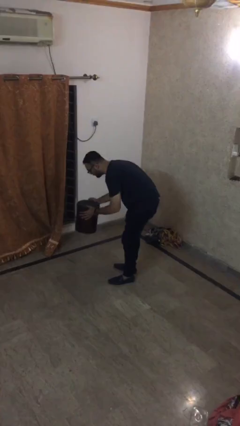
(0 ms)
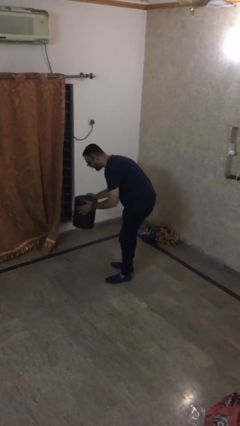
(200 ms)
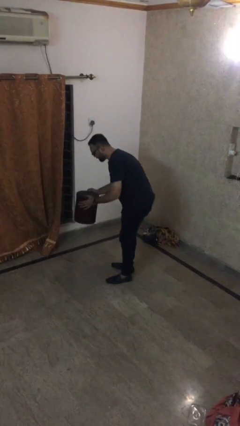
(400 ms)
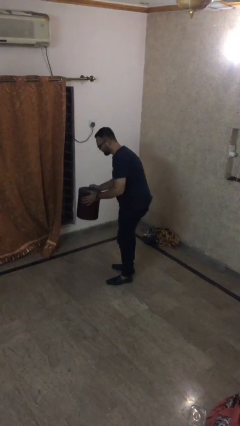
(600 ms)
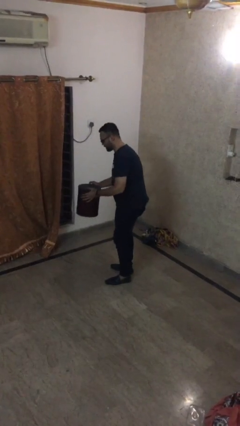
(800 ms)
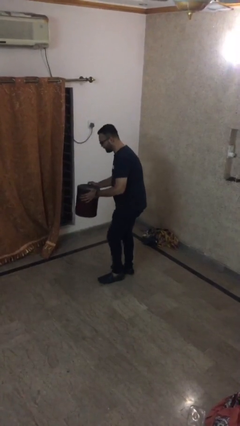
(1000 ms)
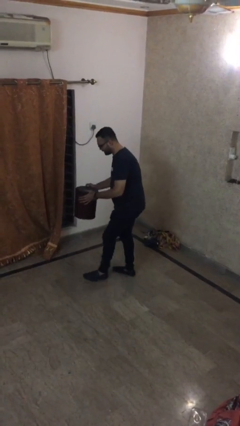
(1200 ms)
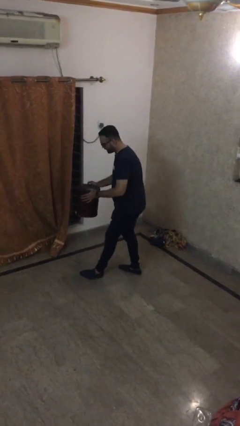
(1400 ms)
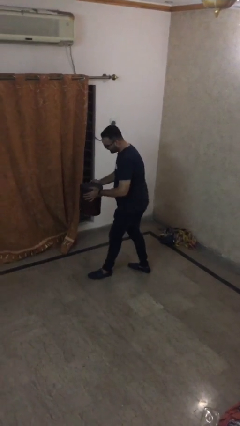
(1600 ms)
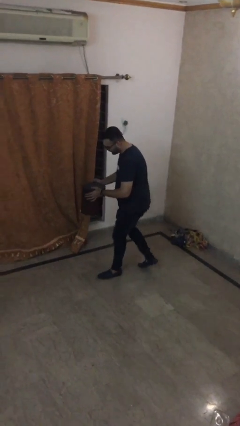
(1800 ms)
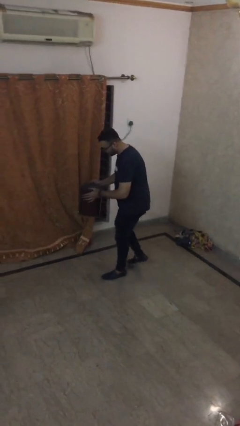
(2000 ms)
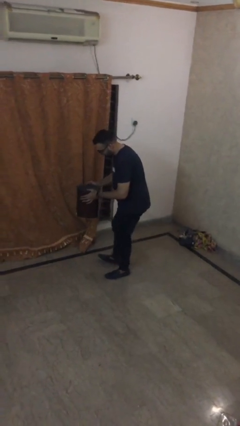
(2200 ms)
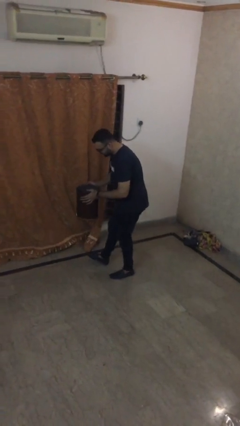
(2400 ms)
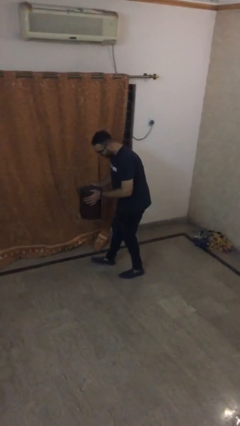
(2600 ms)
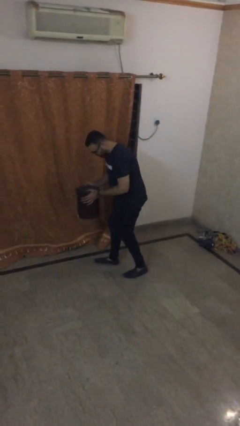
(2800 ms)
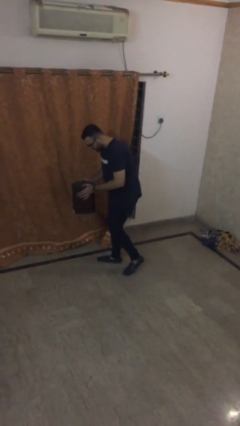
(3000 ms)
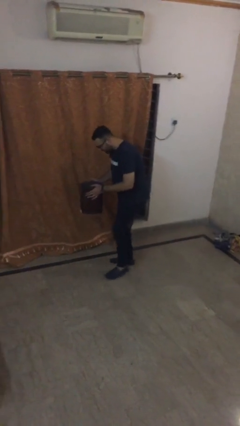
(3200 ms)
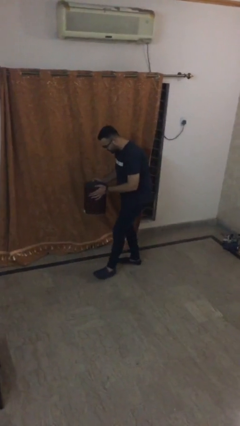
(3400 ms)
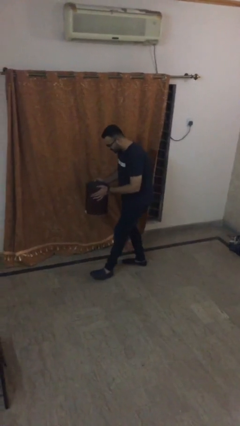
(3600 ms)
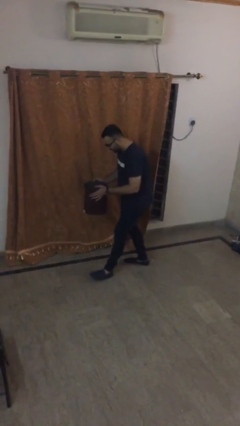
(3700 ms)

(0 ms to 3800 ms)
person carries heavy object

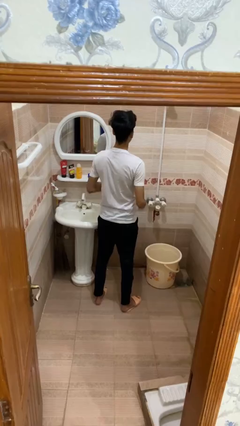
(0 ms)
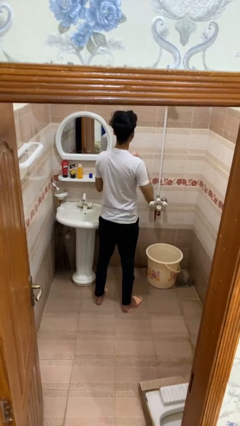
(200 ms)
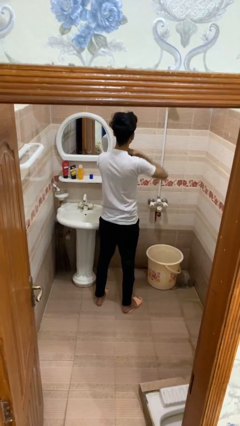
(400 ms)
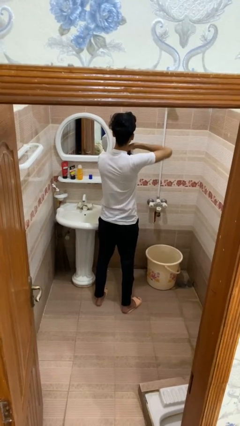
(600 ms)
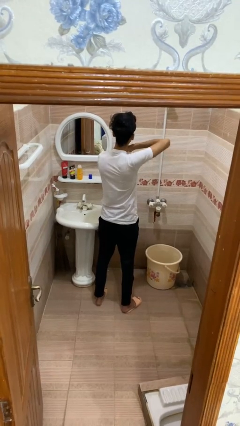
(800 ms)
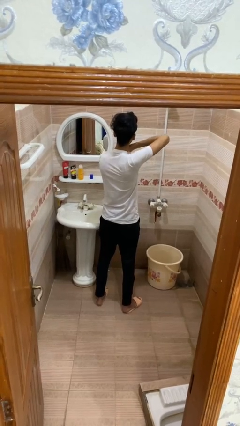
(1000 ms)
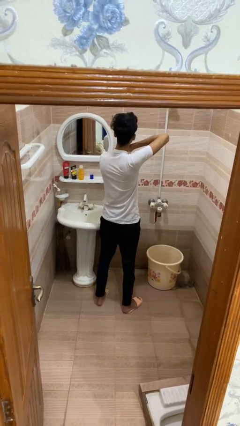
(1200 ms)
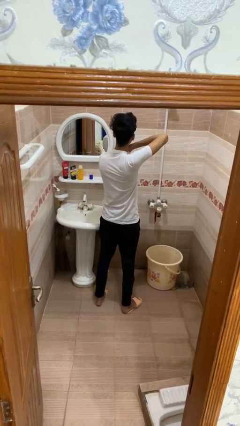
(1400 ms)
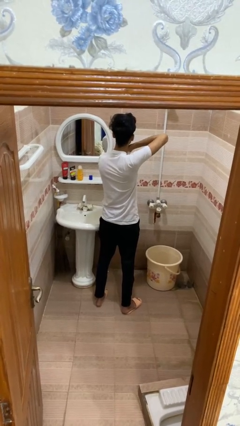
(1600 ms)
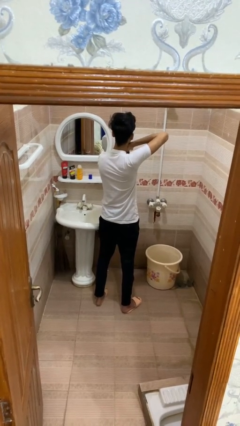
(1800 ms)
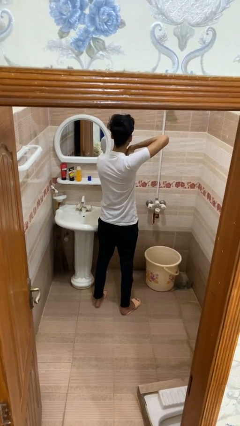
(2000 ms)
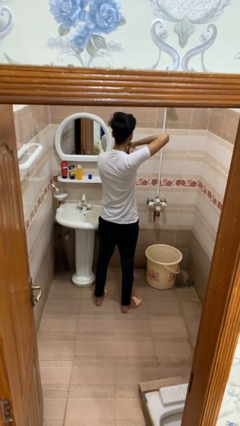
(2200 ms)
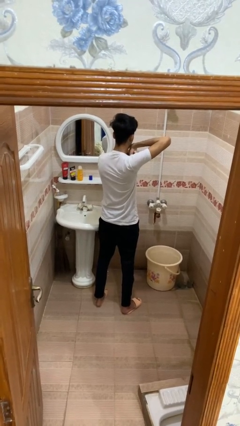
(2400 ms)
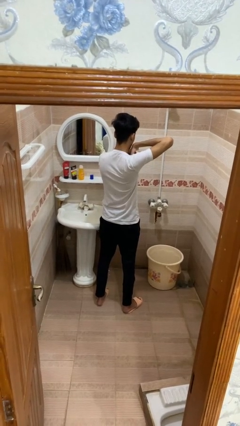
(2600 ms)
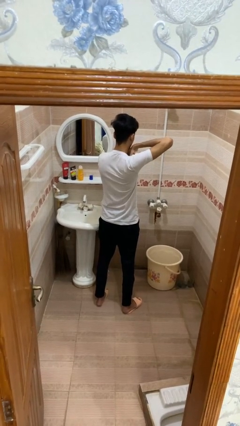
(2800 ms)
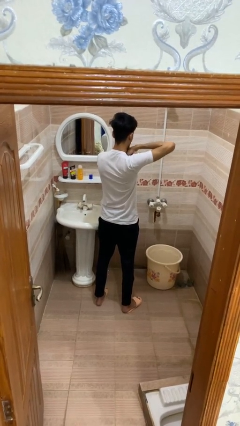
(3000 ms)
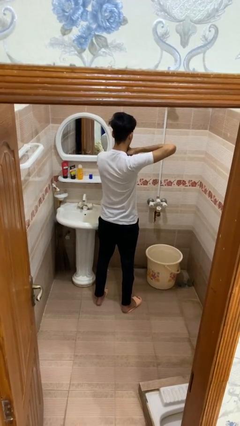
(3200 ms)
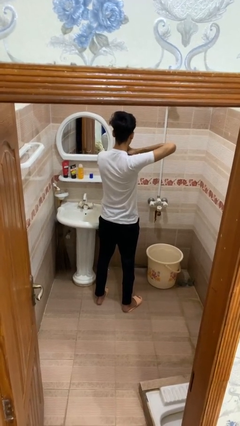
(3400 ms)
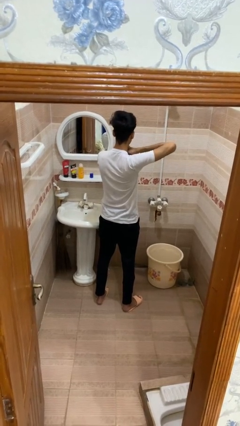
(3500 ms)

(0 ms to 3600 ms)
person applies deodorant

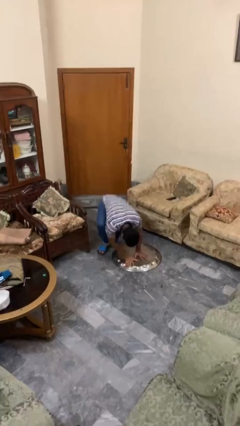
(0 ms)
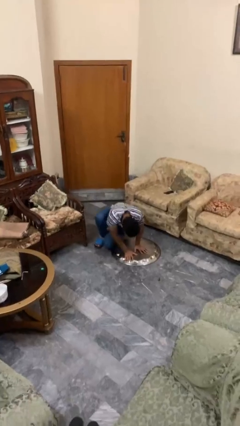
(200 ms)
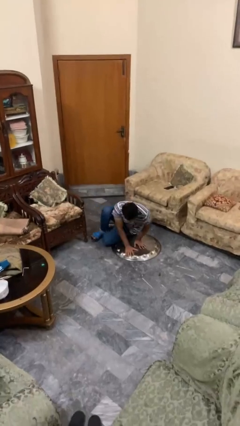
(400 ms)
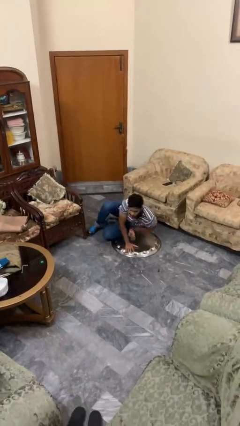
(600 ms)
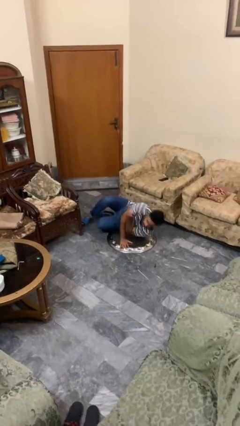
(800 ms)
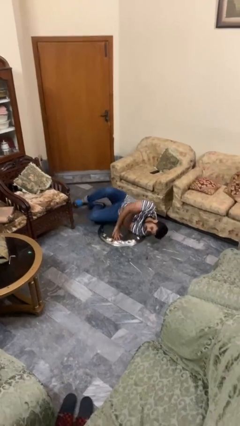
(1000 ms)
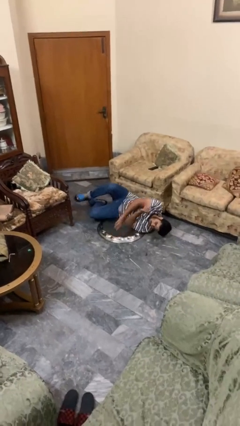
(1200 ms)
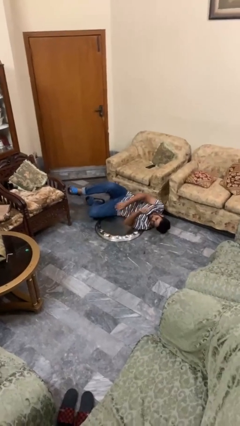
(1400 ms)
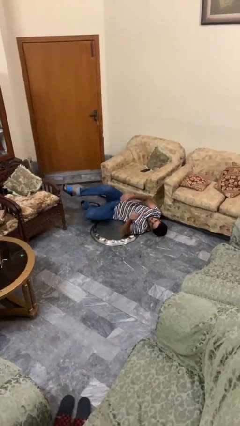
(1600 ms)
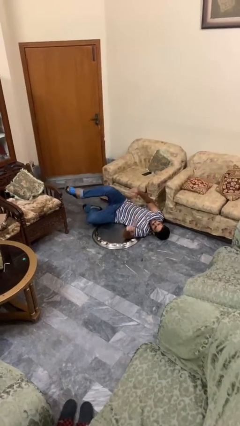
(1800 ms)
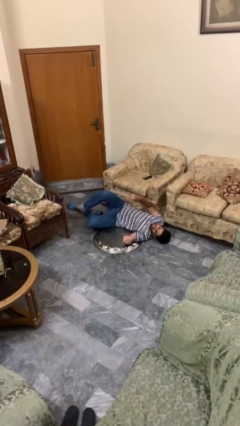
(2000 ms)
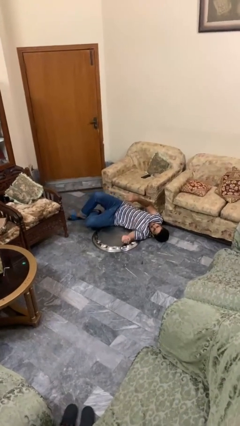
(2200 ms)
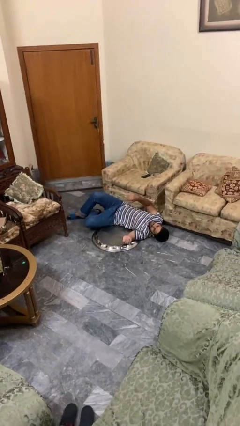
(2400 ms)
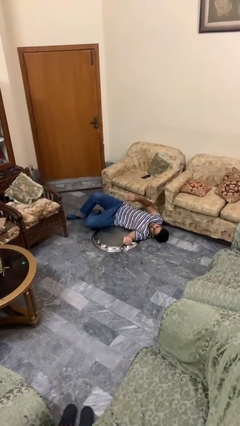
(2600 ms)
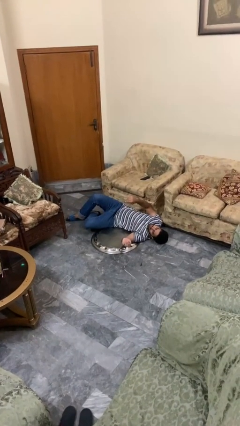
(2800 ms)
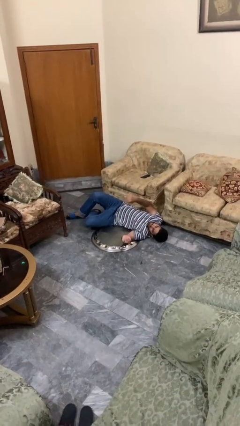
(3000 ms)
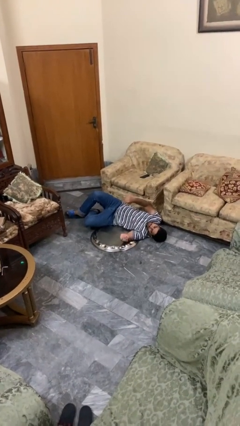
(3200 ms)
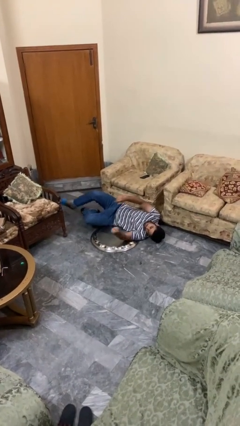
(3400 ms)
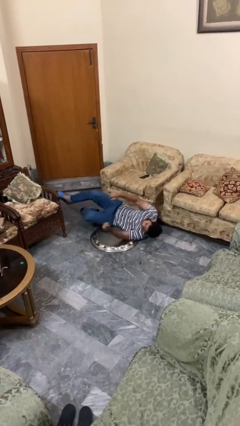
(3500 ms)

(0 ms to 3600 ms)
person lies down on floor

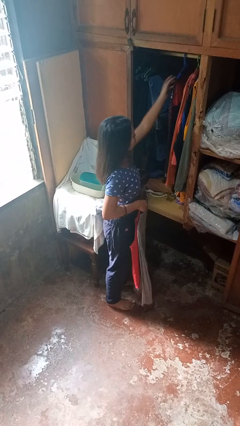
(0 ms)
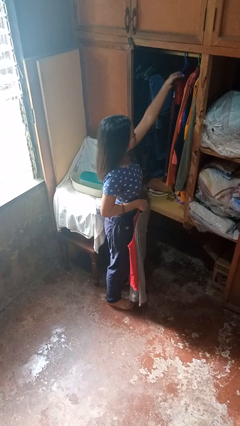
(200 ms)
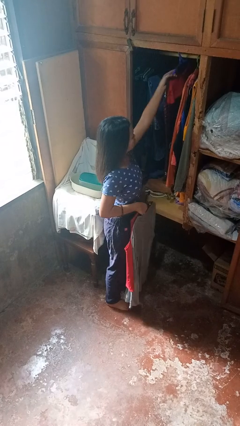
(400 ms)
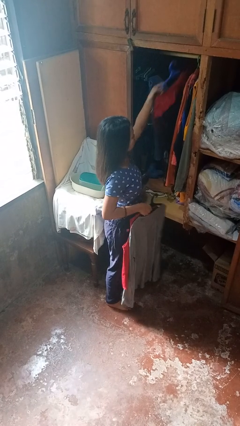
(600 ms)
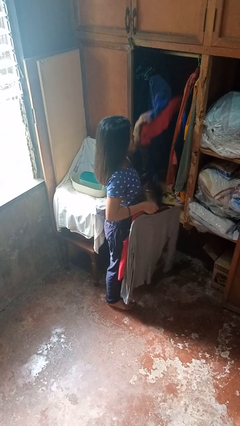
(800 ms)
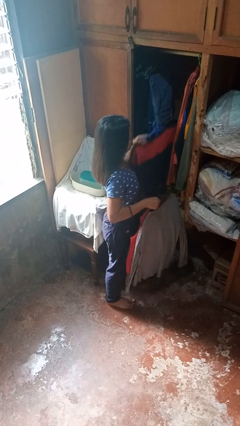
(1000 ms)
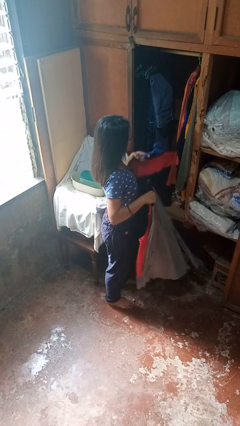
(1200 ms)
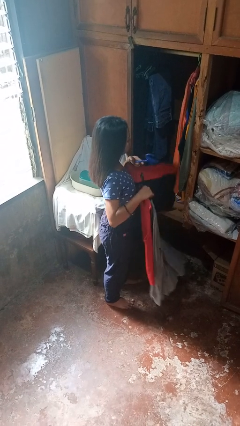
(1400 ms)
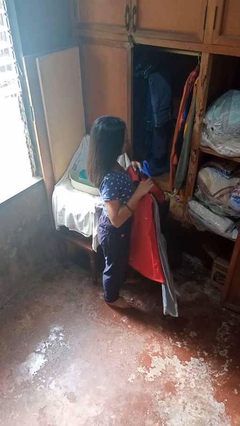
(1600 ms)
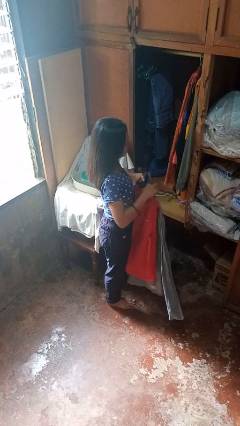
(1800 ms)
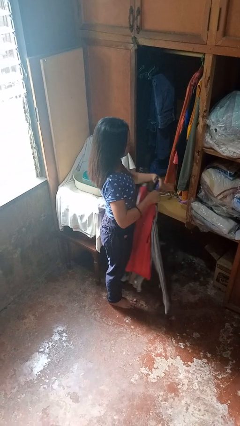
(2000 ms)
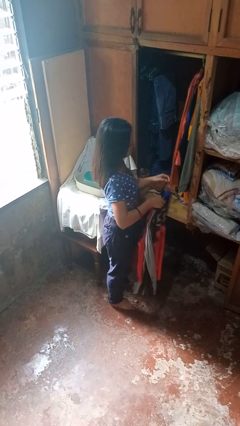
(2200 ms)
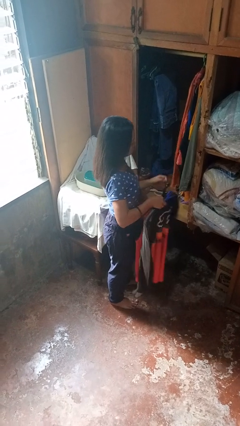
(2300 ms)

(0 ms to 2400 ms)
person takes clothes from closet

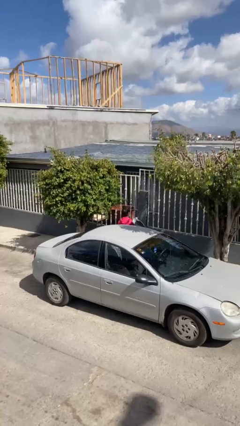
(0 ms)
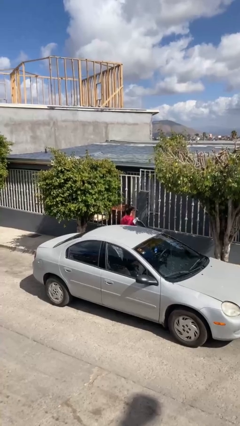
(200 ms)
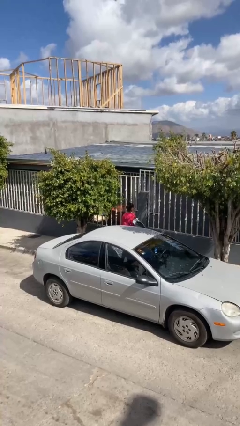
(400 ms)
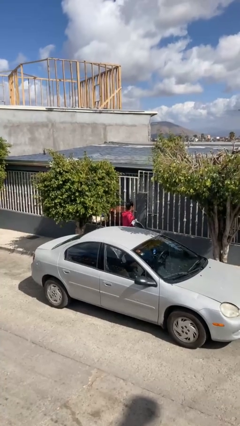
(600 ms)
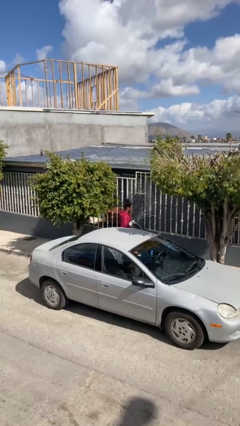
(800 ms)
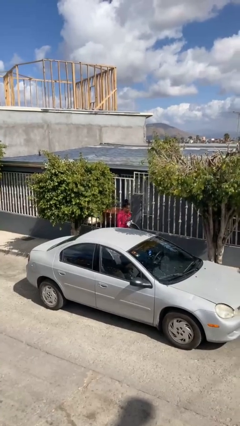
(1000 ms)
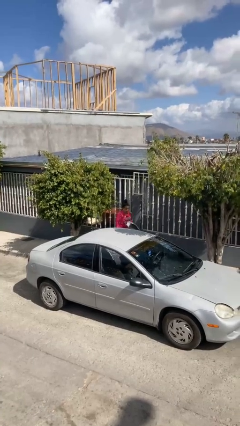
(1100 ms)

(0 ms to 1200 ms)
person exits car

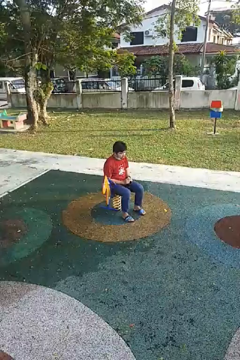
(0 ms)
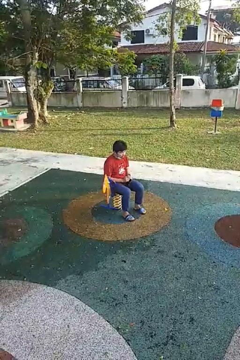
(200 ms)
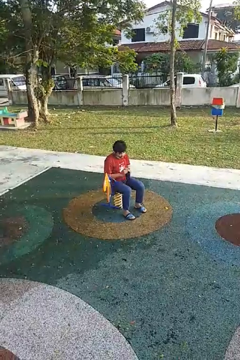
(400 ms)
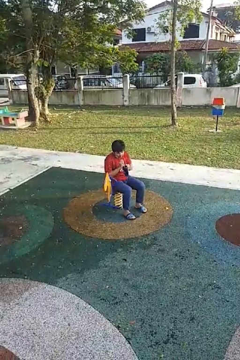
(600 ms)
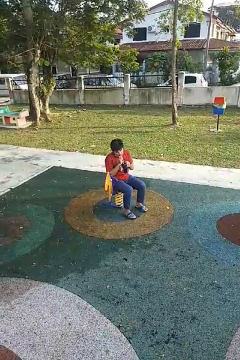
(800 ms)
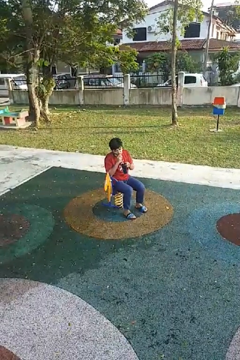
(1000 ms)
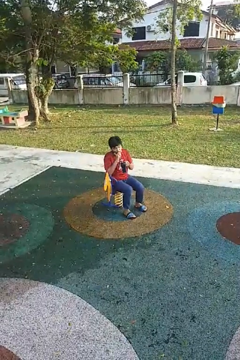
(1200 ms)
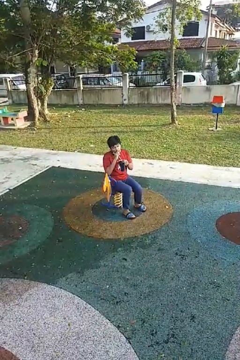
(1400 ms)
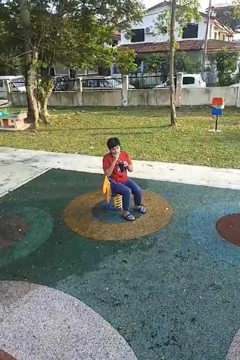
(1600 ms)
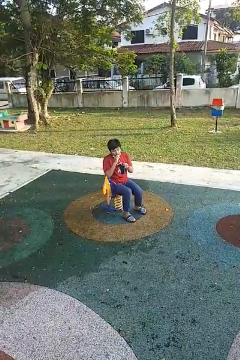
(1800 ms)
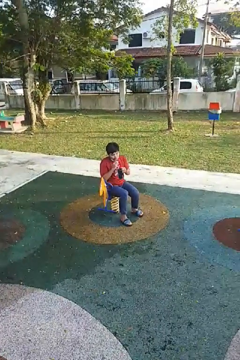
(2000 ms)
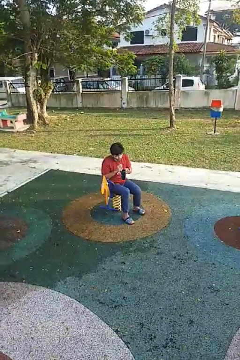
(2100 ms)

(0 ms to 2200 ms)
person drinks from straw

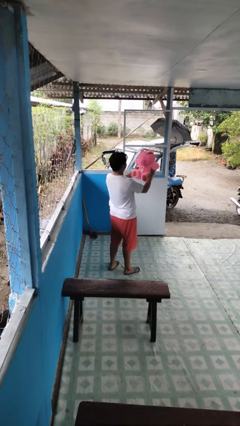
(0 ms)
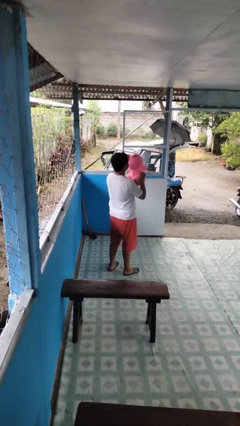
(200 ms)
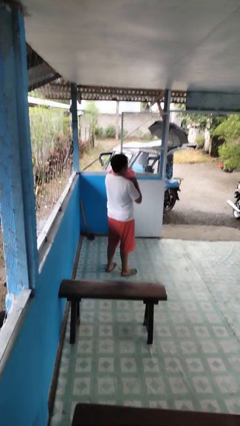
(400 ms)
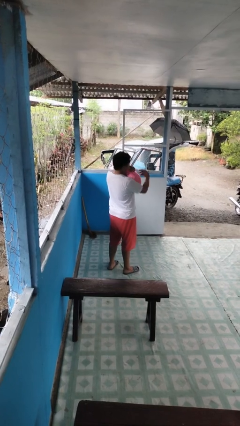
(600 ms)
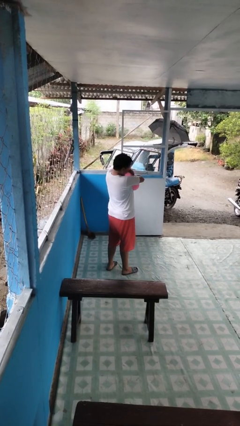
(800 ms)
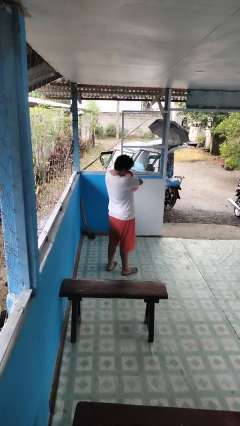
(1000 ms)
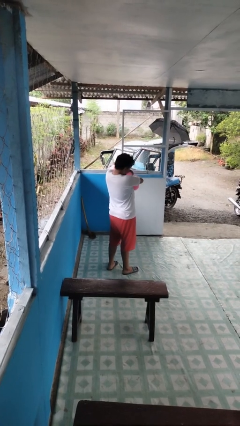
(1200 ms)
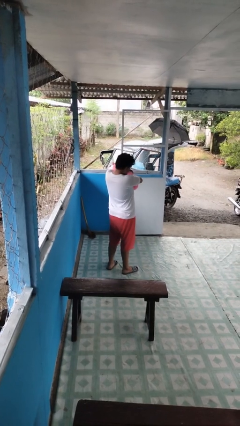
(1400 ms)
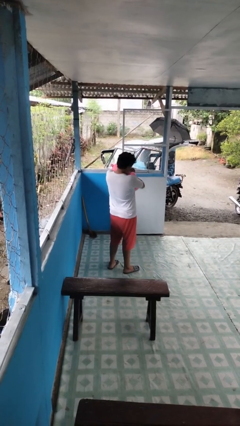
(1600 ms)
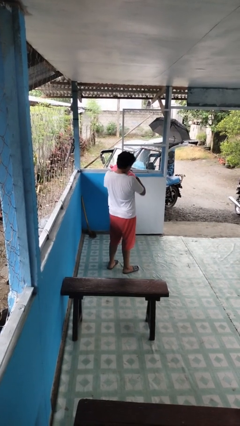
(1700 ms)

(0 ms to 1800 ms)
person hugs stuffed animal
